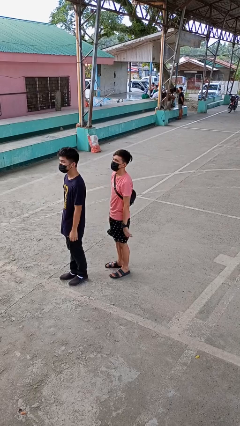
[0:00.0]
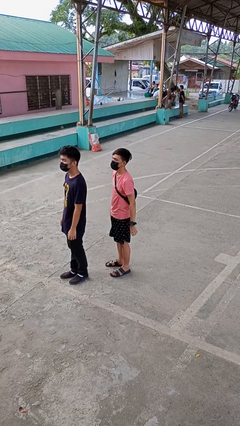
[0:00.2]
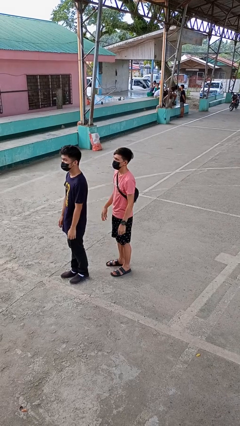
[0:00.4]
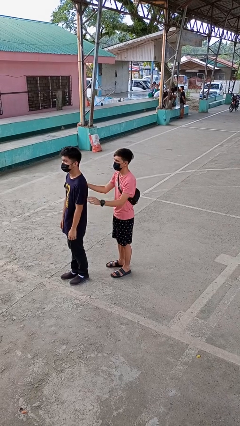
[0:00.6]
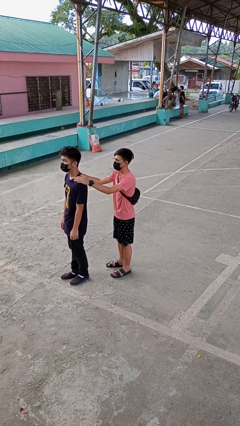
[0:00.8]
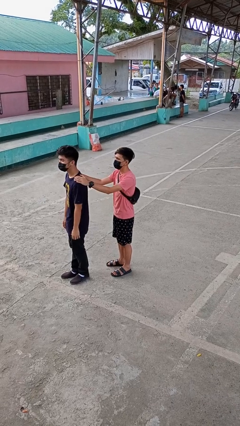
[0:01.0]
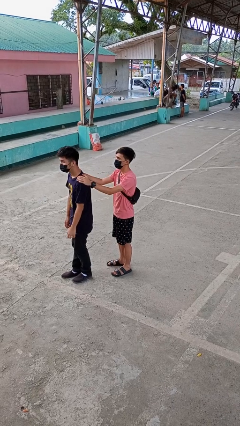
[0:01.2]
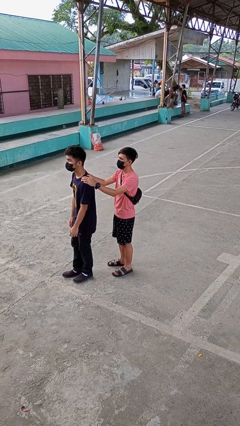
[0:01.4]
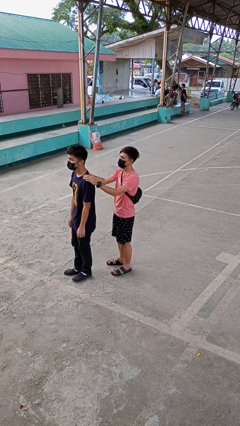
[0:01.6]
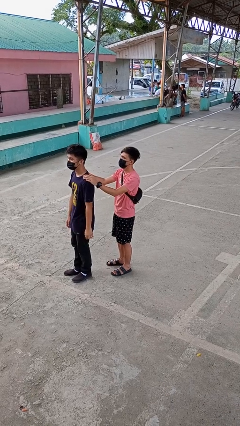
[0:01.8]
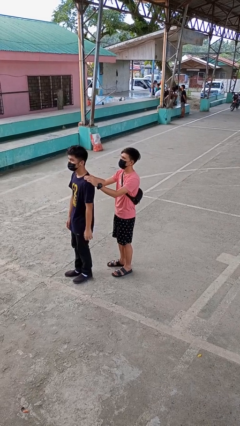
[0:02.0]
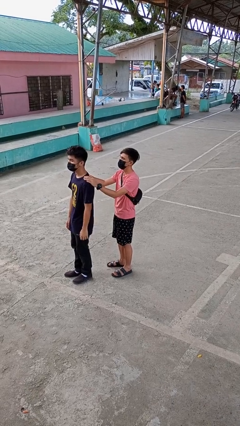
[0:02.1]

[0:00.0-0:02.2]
person grabs person by shoulder

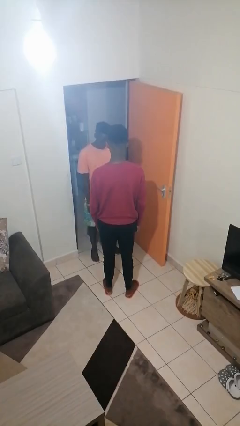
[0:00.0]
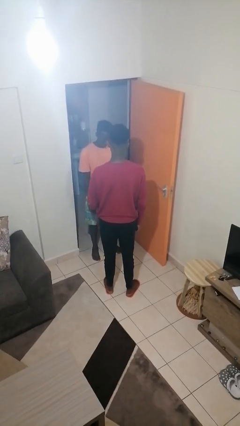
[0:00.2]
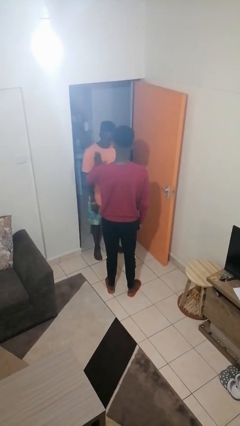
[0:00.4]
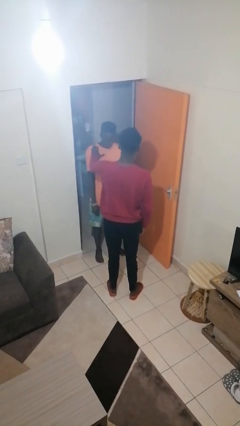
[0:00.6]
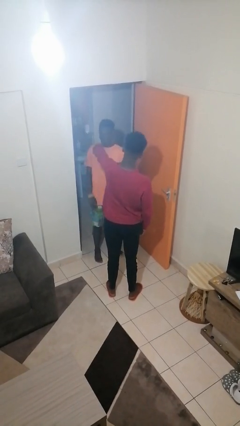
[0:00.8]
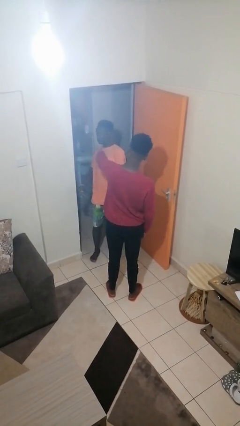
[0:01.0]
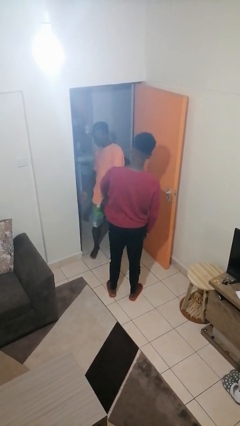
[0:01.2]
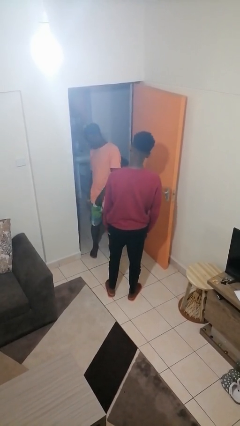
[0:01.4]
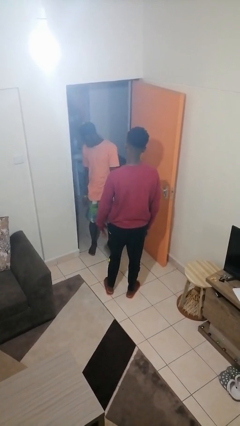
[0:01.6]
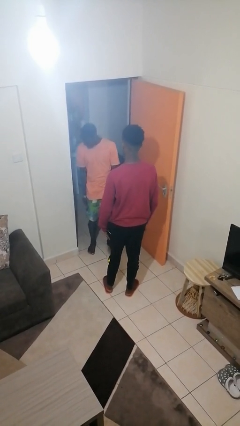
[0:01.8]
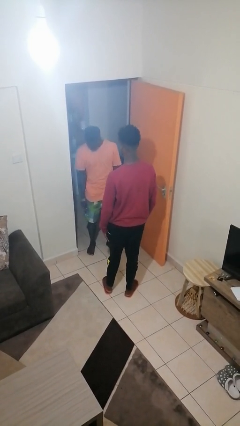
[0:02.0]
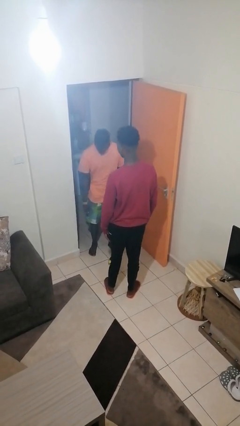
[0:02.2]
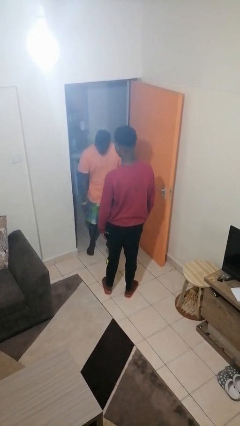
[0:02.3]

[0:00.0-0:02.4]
person shoves person

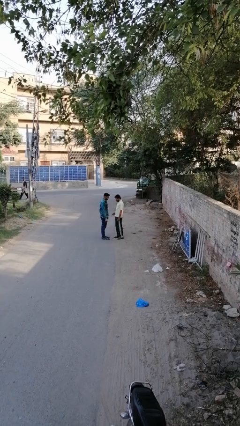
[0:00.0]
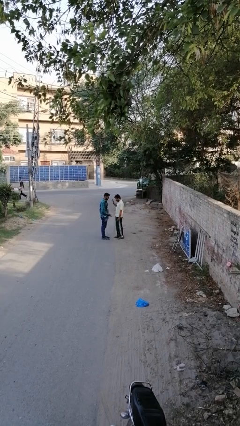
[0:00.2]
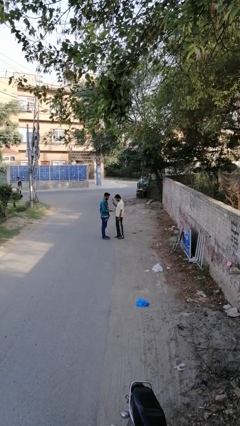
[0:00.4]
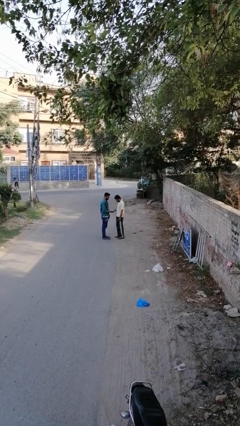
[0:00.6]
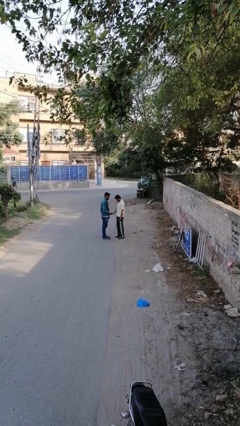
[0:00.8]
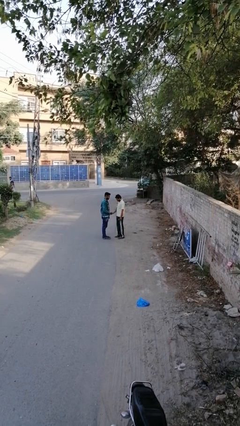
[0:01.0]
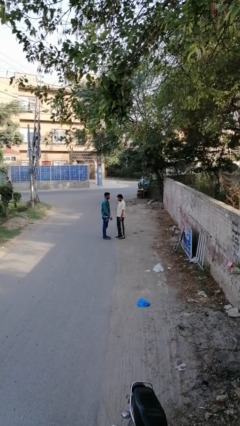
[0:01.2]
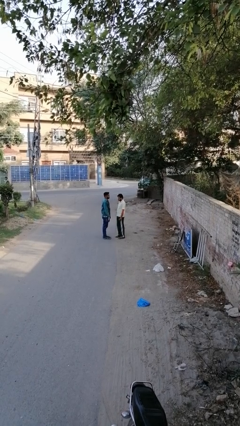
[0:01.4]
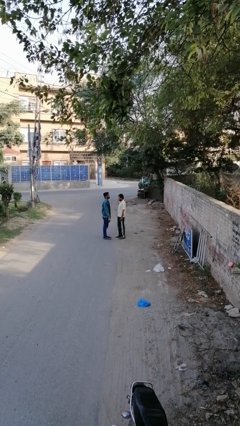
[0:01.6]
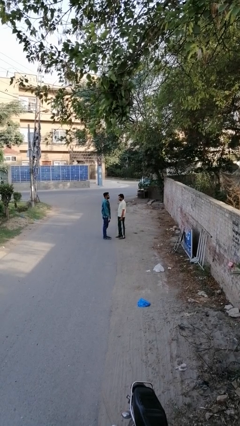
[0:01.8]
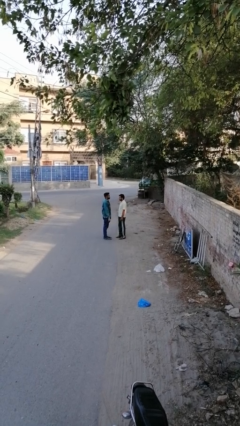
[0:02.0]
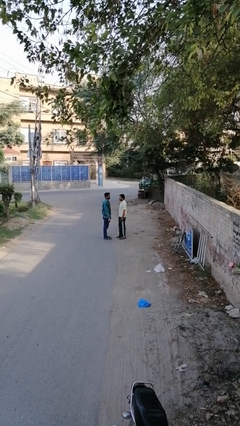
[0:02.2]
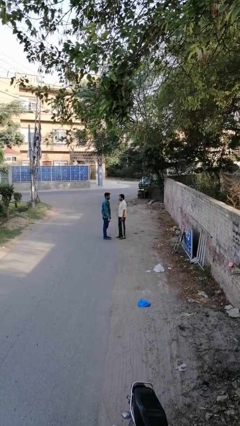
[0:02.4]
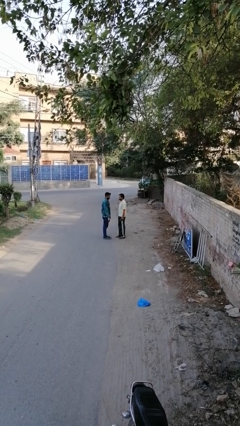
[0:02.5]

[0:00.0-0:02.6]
person highfives hand

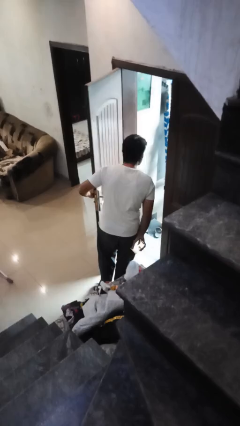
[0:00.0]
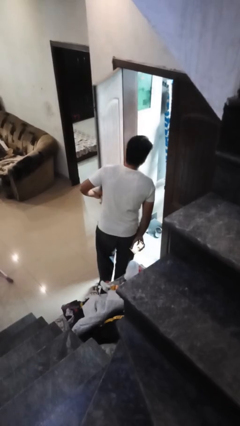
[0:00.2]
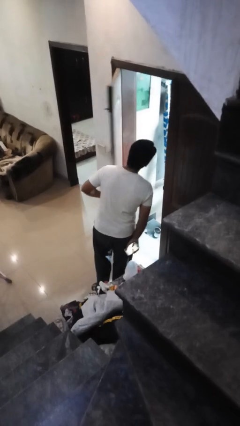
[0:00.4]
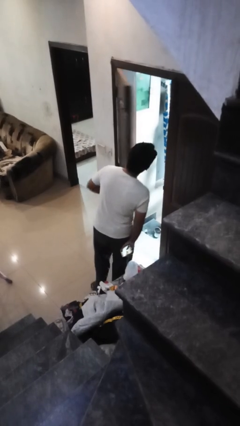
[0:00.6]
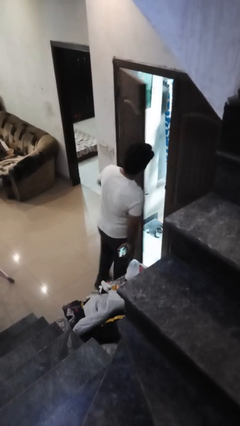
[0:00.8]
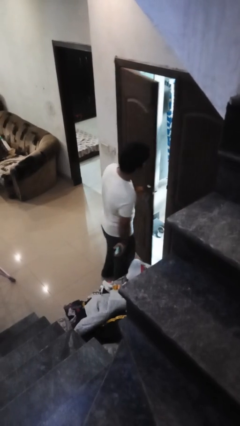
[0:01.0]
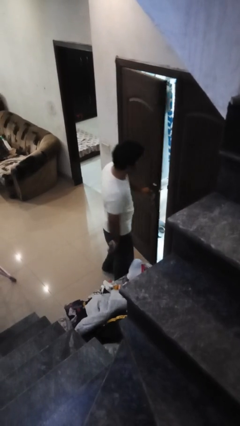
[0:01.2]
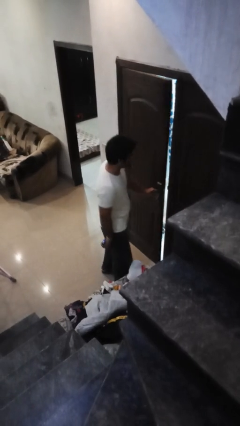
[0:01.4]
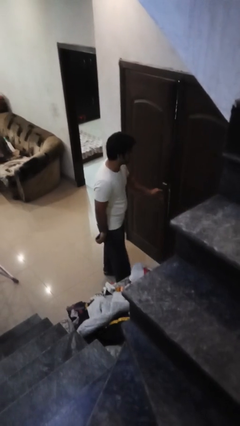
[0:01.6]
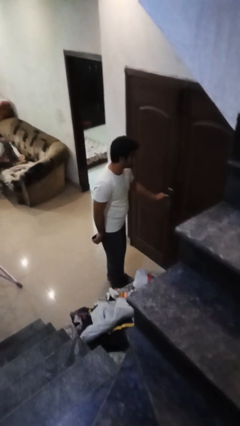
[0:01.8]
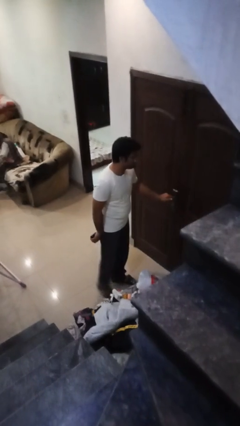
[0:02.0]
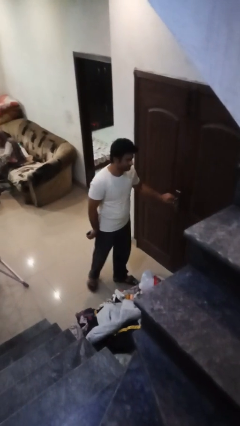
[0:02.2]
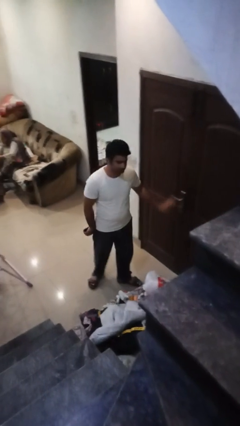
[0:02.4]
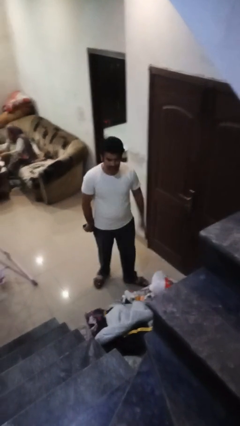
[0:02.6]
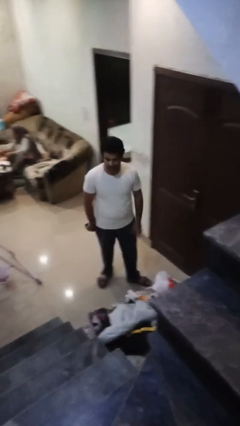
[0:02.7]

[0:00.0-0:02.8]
person closes facility door

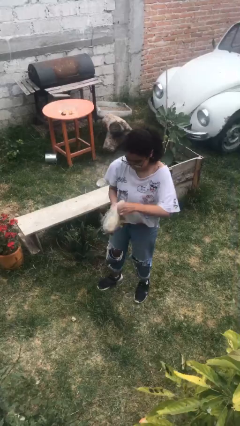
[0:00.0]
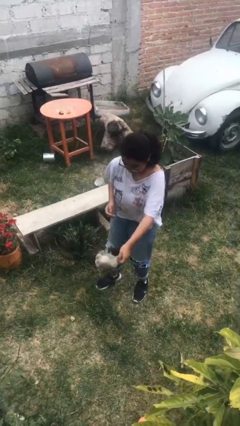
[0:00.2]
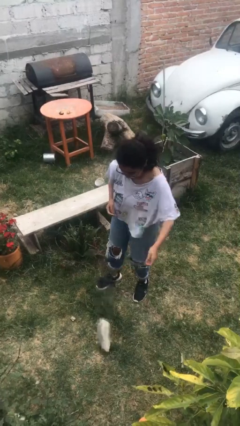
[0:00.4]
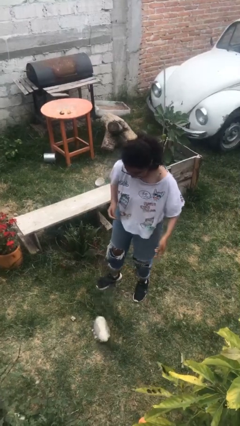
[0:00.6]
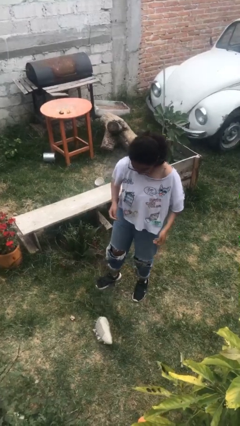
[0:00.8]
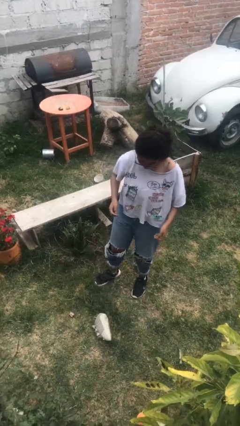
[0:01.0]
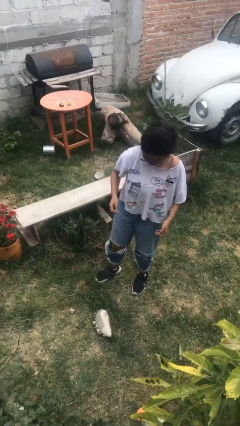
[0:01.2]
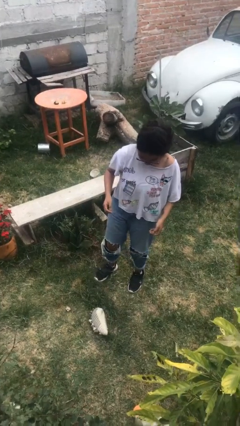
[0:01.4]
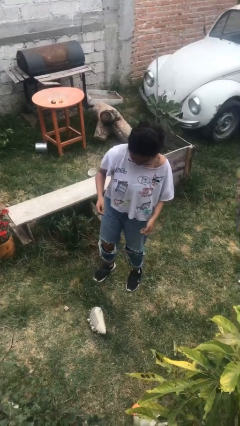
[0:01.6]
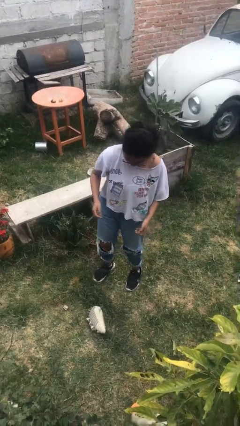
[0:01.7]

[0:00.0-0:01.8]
person drops object

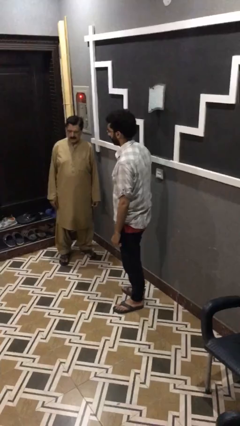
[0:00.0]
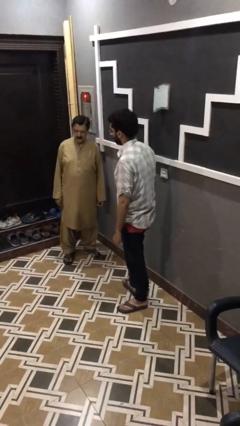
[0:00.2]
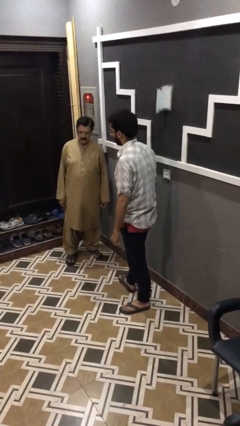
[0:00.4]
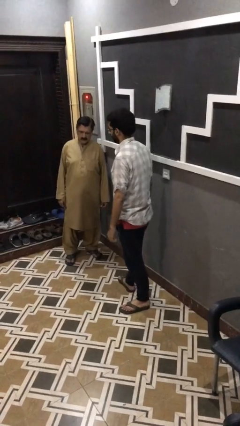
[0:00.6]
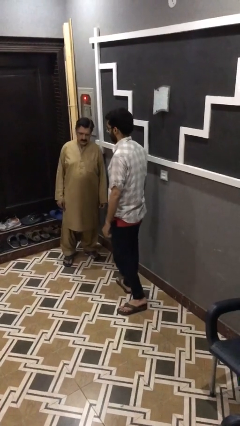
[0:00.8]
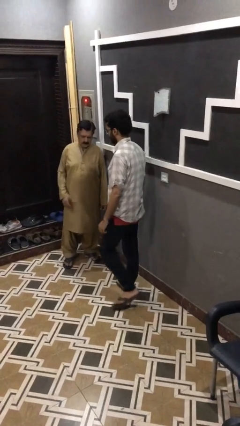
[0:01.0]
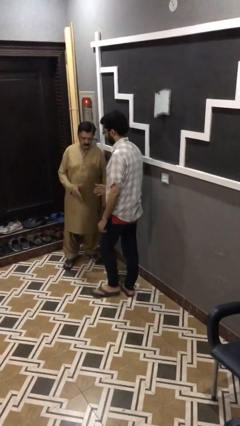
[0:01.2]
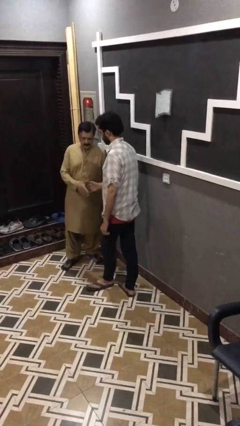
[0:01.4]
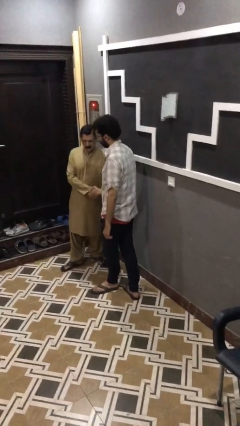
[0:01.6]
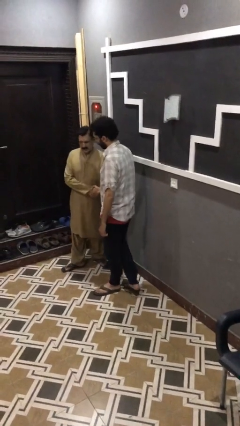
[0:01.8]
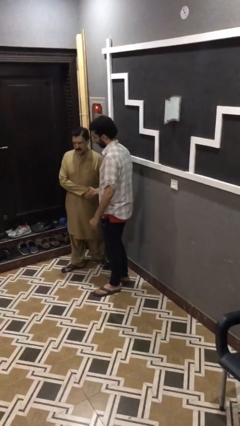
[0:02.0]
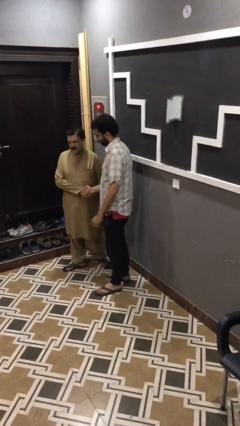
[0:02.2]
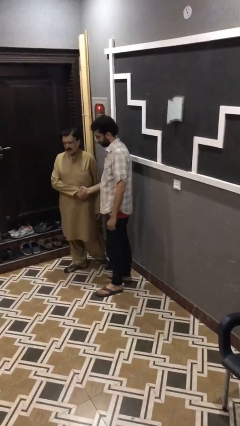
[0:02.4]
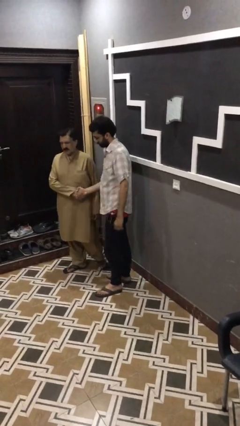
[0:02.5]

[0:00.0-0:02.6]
person shakes hand

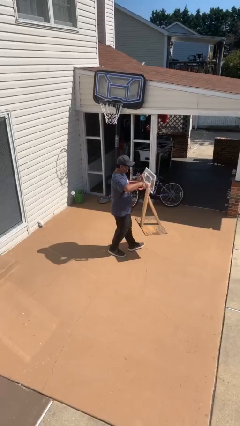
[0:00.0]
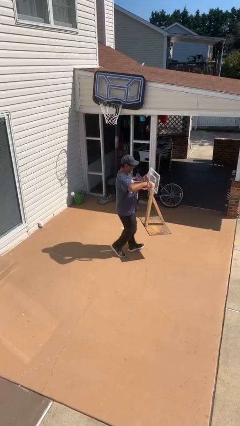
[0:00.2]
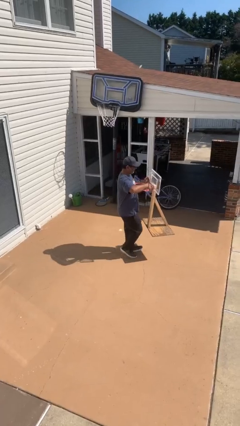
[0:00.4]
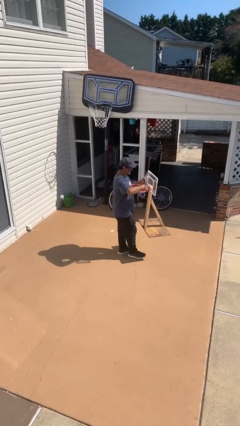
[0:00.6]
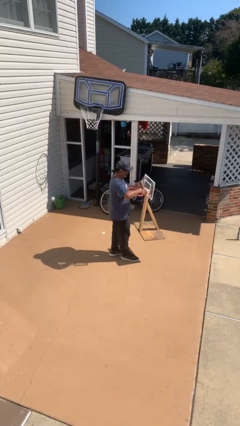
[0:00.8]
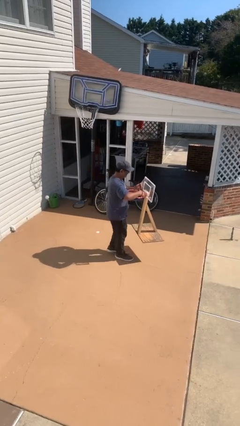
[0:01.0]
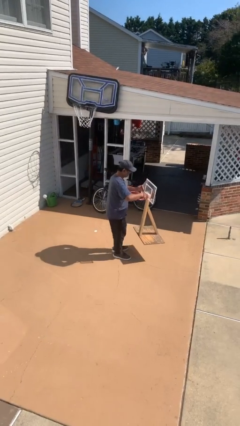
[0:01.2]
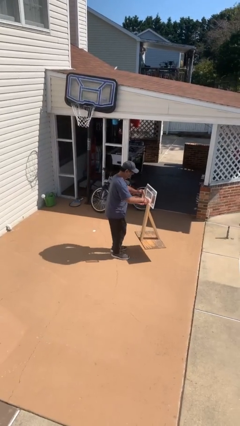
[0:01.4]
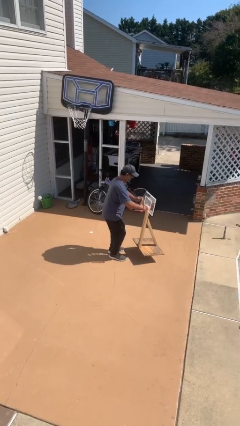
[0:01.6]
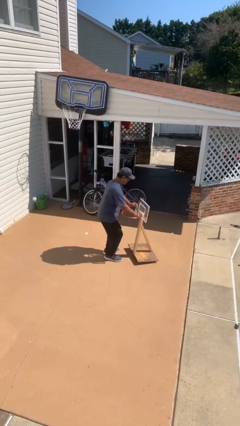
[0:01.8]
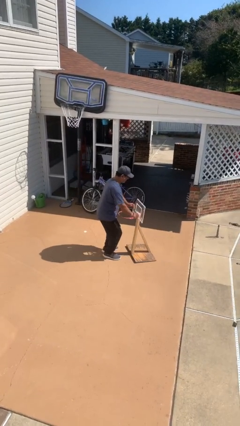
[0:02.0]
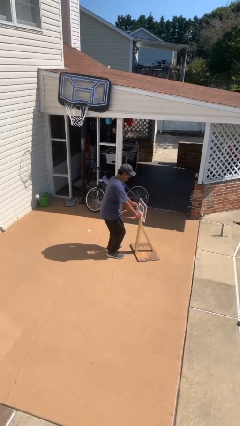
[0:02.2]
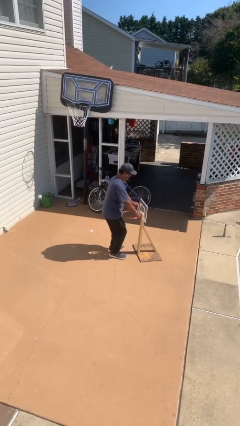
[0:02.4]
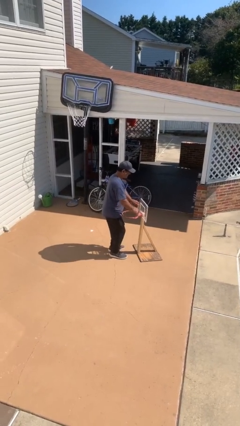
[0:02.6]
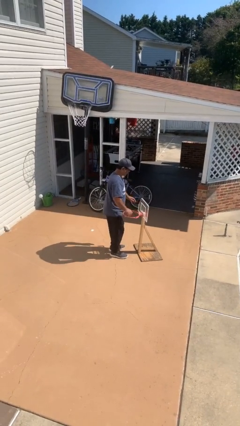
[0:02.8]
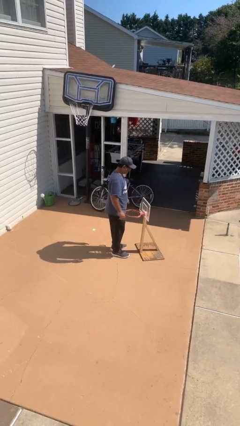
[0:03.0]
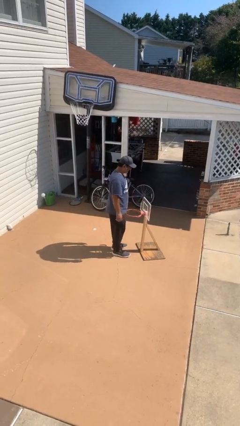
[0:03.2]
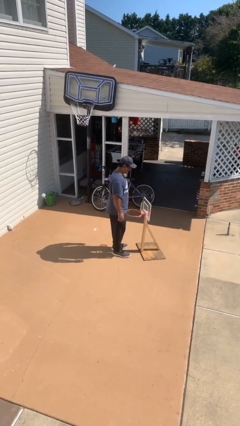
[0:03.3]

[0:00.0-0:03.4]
person puts down object on floor
